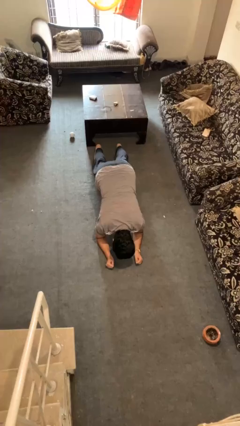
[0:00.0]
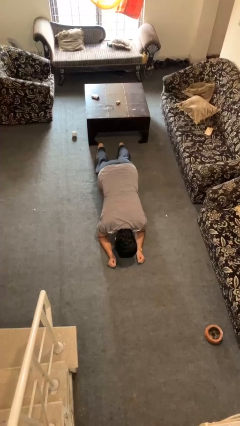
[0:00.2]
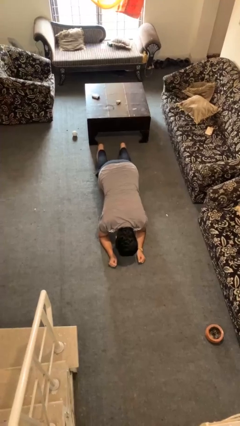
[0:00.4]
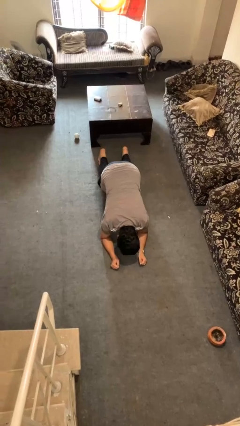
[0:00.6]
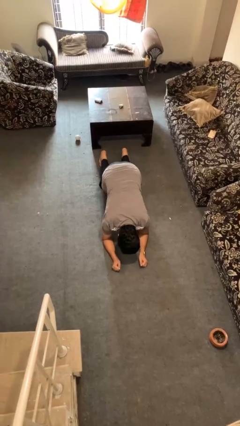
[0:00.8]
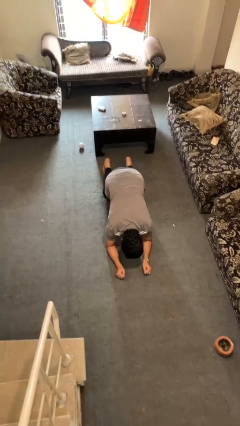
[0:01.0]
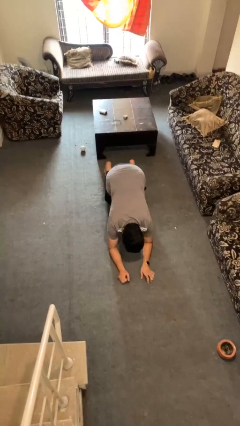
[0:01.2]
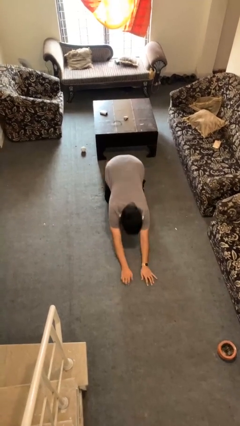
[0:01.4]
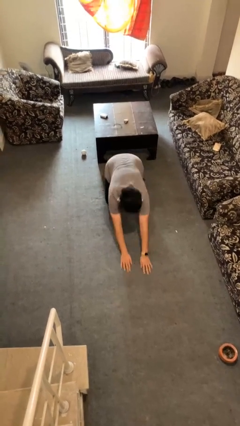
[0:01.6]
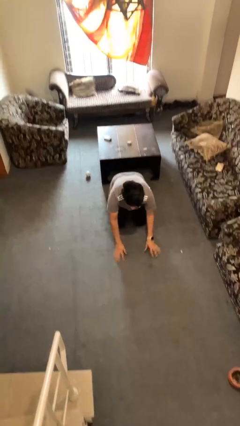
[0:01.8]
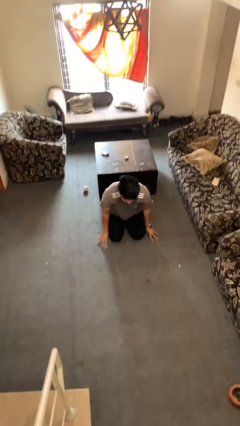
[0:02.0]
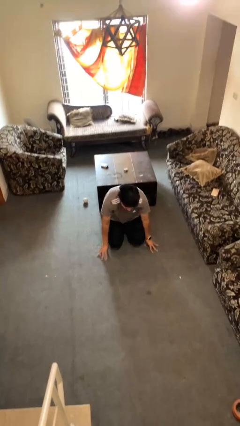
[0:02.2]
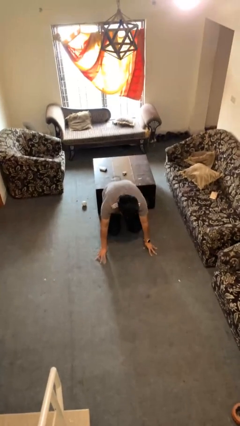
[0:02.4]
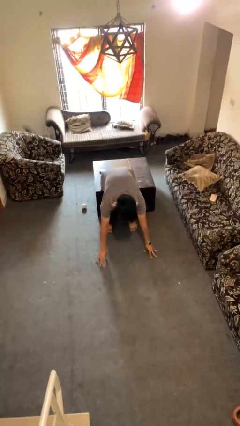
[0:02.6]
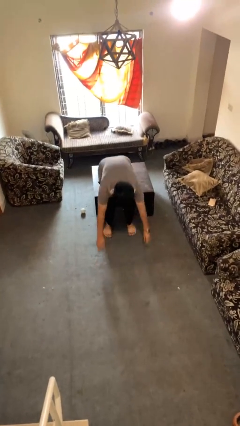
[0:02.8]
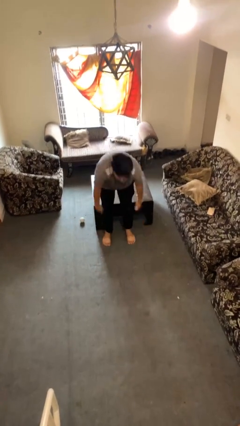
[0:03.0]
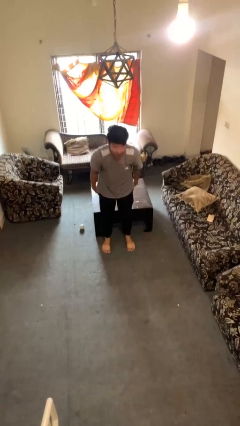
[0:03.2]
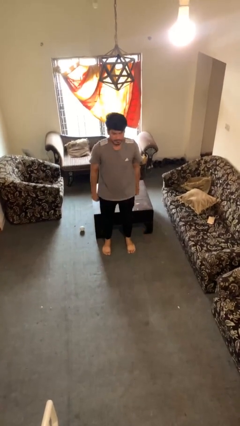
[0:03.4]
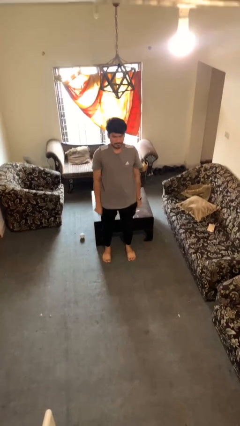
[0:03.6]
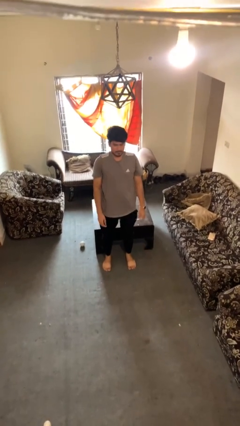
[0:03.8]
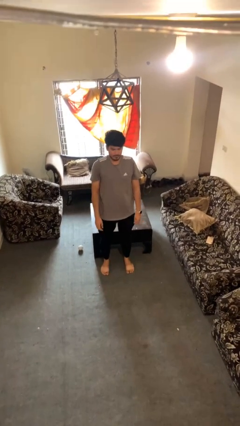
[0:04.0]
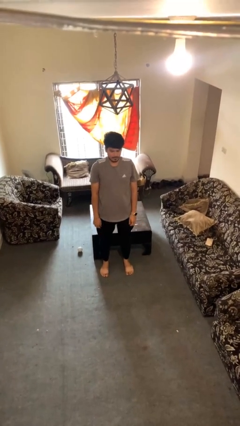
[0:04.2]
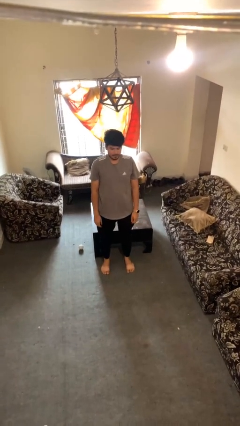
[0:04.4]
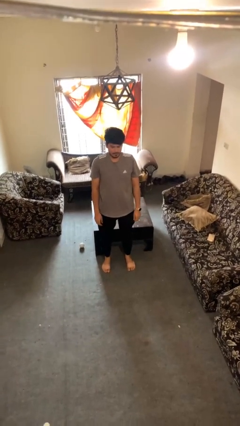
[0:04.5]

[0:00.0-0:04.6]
person stands up from floor

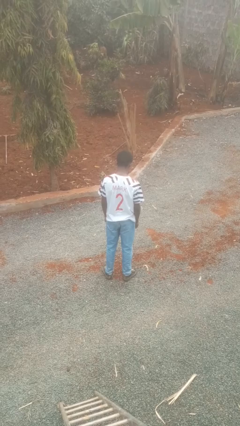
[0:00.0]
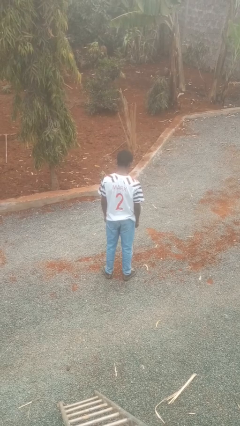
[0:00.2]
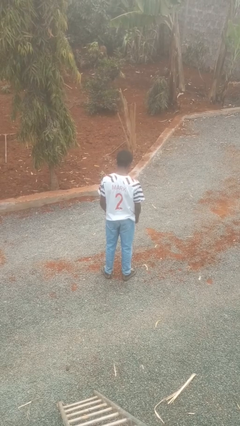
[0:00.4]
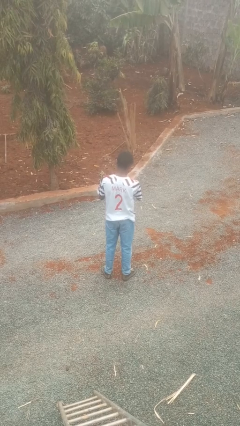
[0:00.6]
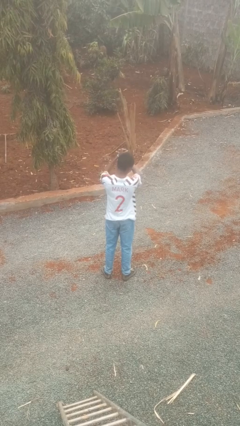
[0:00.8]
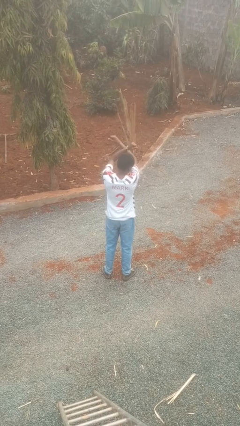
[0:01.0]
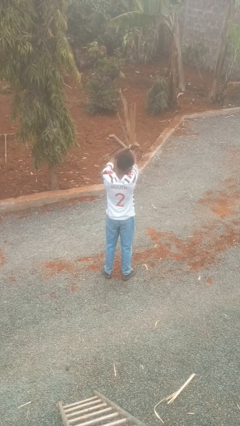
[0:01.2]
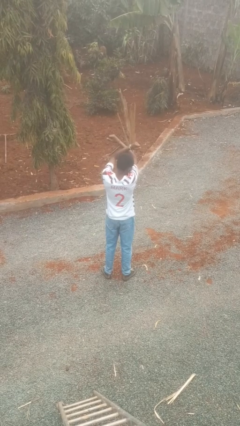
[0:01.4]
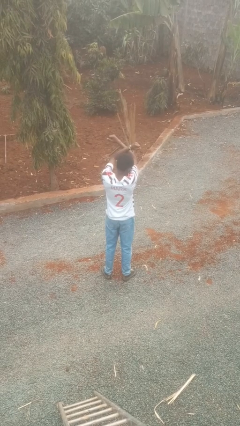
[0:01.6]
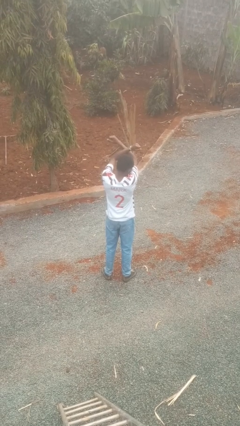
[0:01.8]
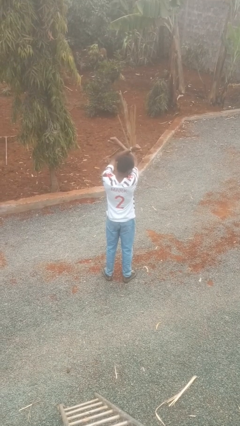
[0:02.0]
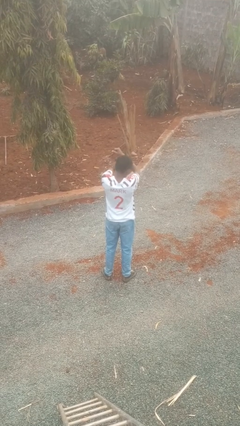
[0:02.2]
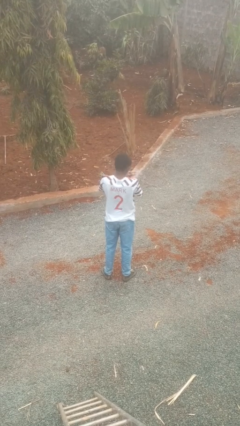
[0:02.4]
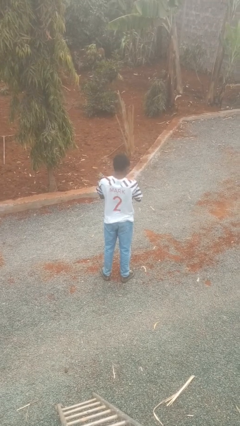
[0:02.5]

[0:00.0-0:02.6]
person gestures arms x

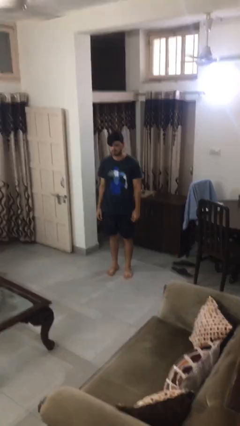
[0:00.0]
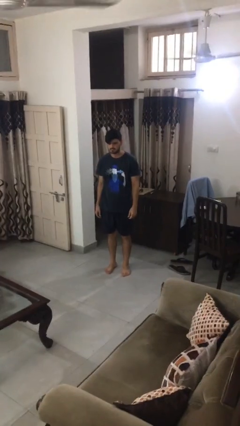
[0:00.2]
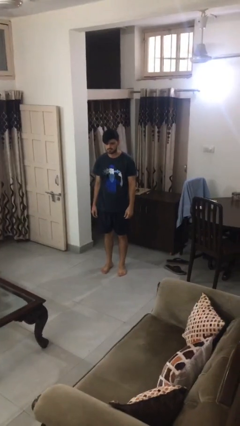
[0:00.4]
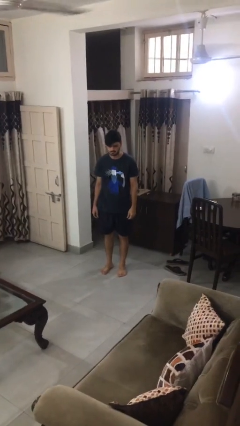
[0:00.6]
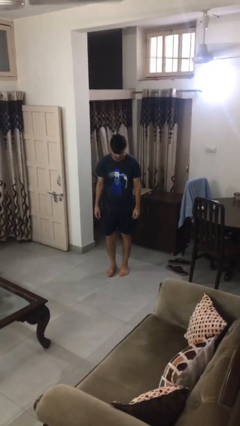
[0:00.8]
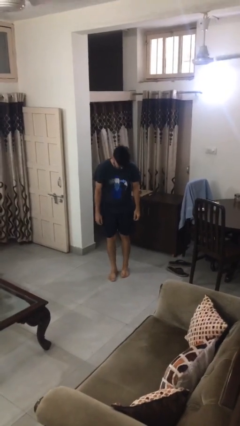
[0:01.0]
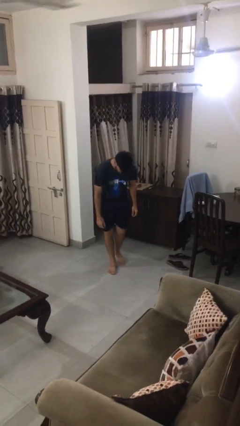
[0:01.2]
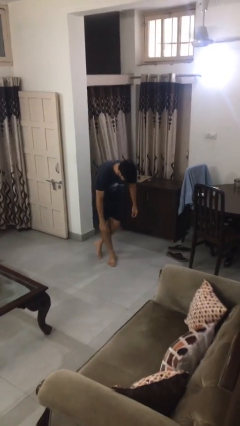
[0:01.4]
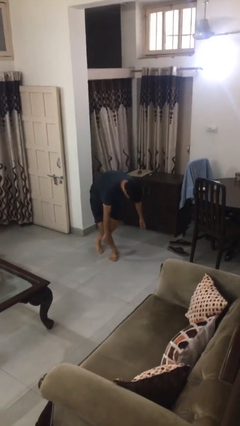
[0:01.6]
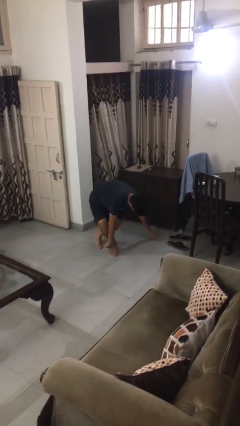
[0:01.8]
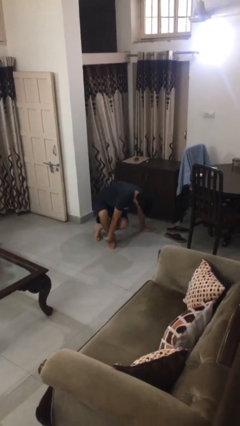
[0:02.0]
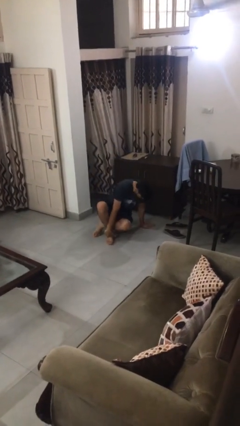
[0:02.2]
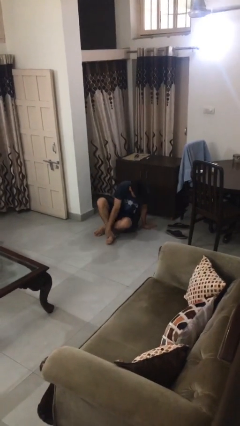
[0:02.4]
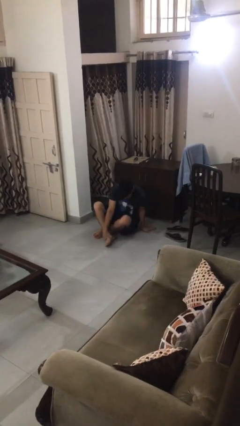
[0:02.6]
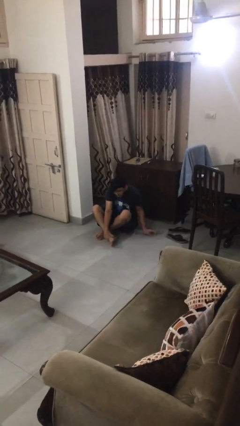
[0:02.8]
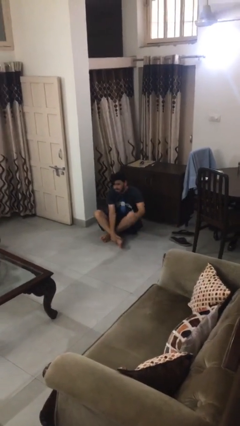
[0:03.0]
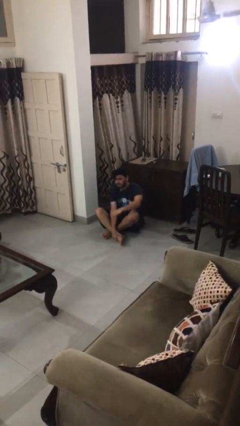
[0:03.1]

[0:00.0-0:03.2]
person sits crisscross

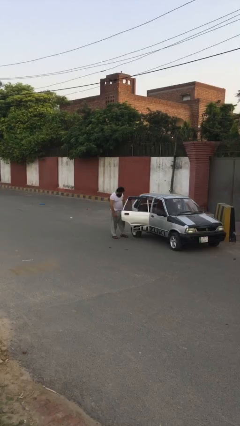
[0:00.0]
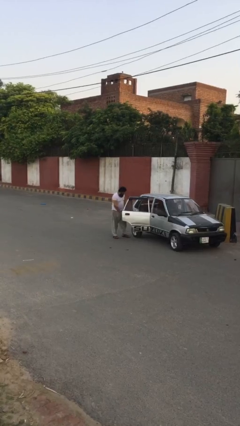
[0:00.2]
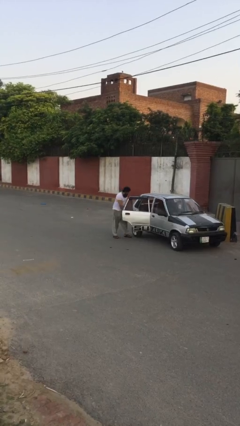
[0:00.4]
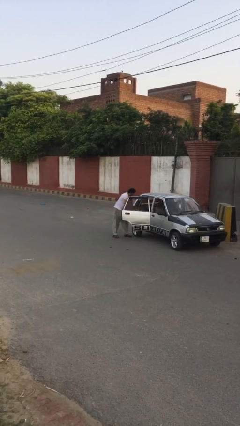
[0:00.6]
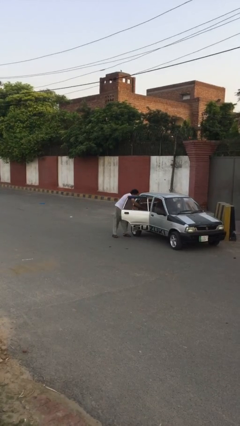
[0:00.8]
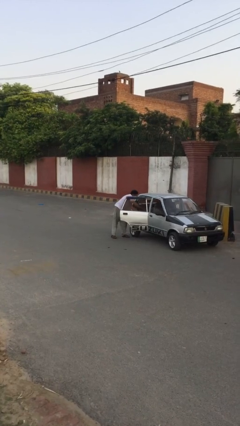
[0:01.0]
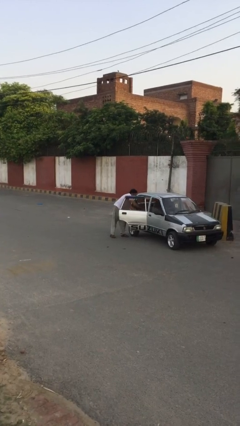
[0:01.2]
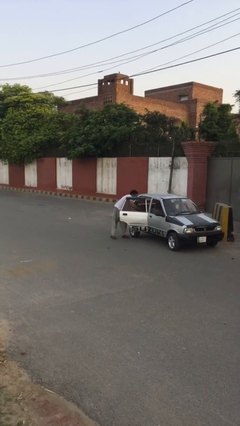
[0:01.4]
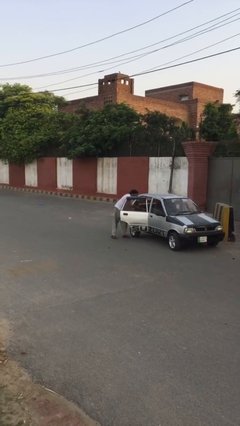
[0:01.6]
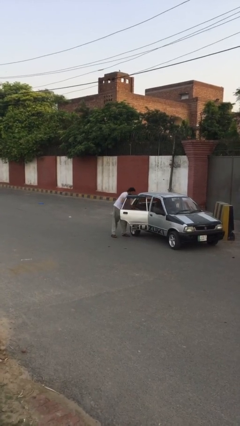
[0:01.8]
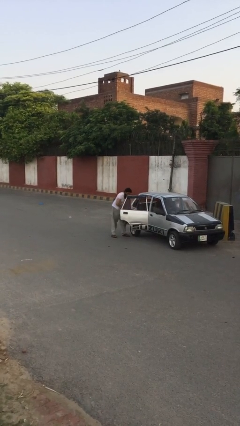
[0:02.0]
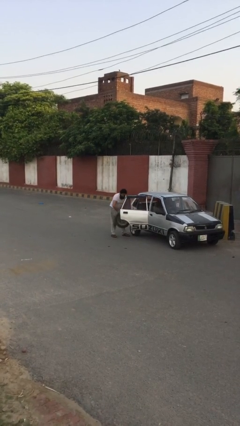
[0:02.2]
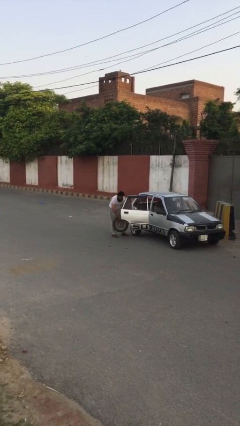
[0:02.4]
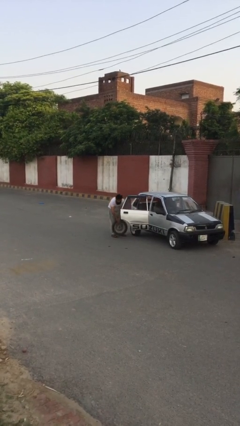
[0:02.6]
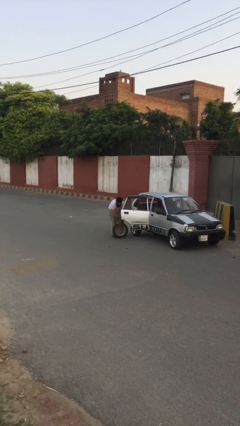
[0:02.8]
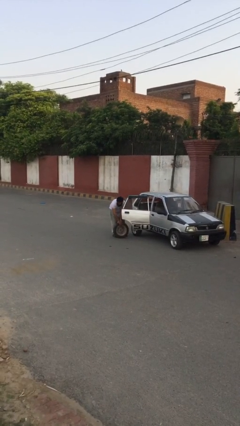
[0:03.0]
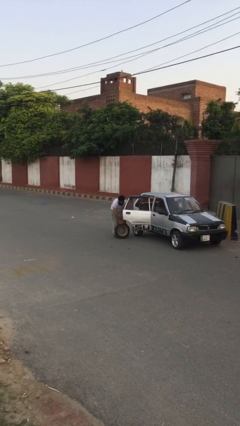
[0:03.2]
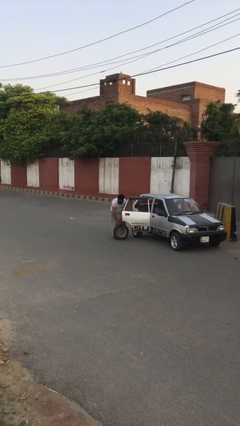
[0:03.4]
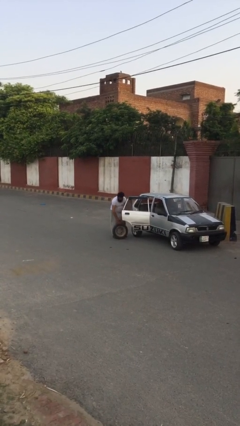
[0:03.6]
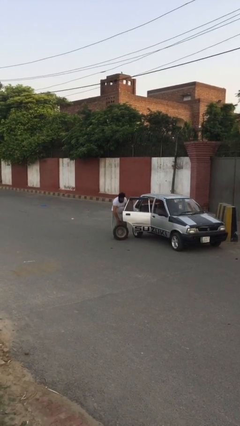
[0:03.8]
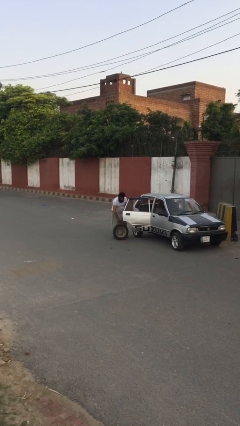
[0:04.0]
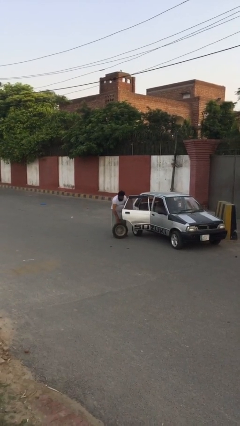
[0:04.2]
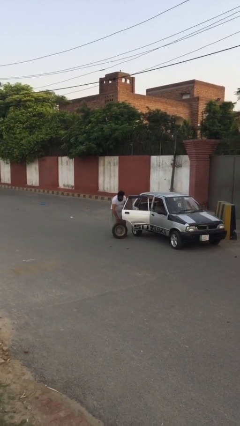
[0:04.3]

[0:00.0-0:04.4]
person unloads car

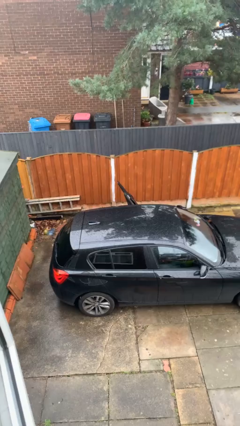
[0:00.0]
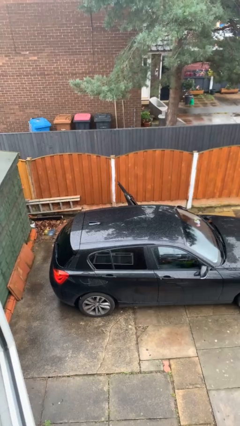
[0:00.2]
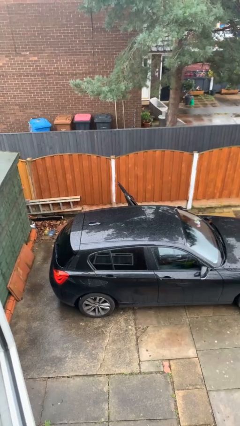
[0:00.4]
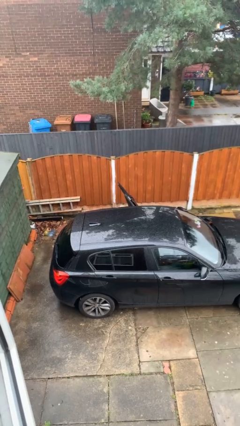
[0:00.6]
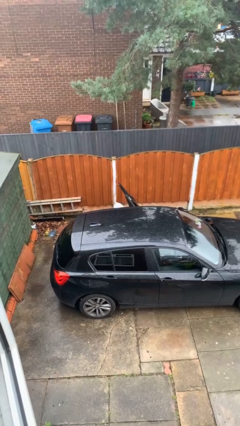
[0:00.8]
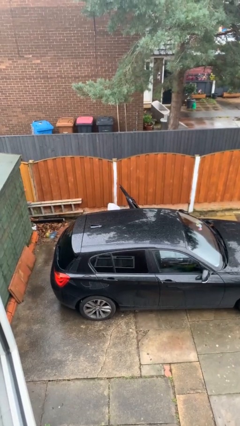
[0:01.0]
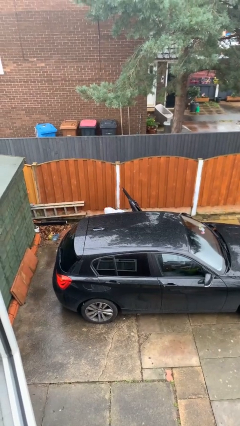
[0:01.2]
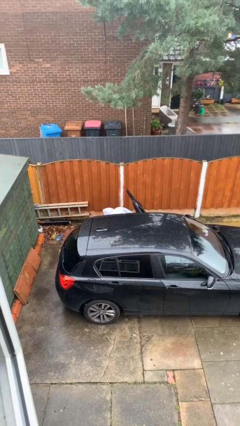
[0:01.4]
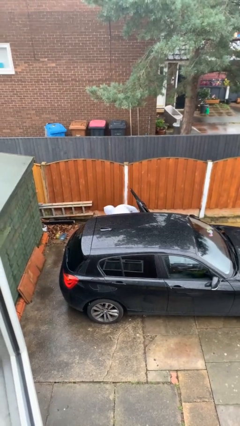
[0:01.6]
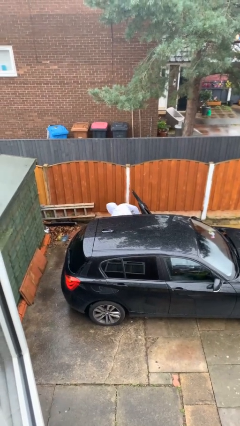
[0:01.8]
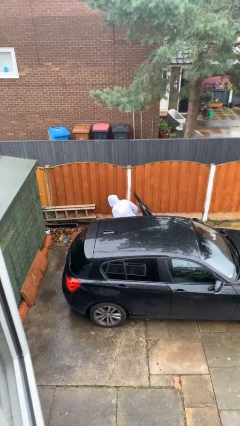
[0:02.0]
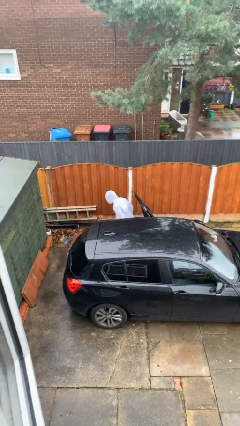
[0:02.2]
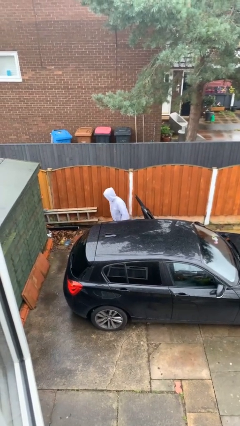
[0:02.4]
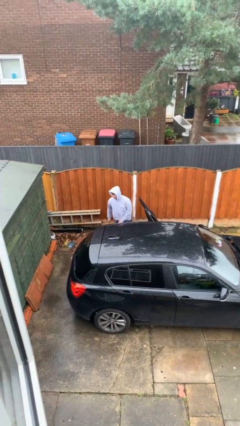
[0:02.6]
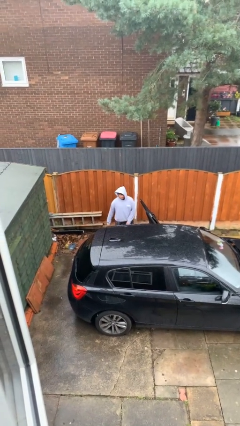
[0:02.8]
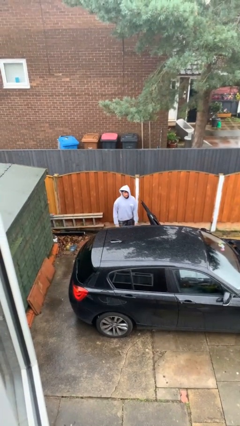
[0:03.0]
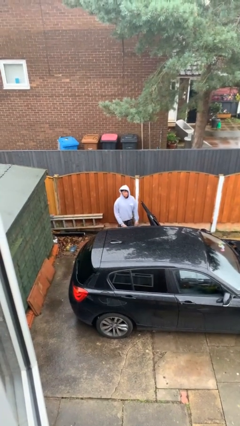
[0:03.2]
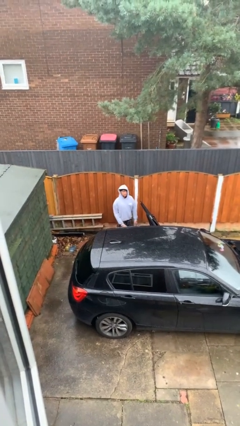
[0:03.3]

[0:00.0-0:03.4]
person exits car
